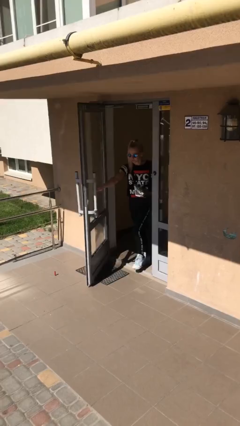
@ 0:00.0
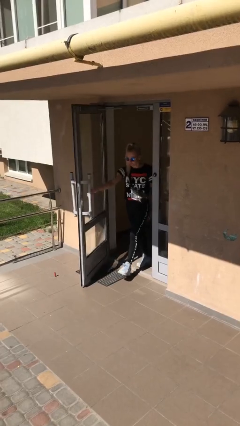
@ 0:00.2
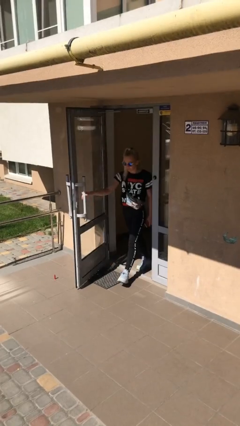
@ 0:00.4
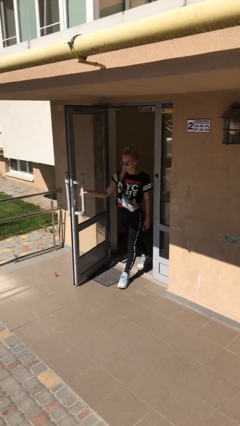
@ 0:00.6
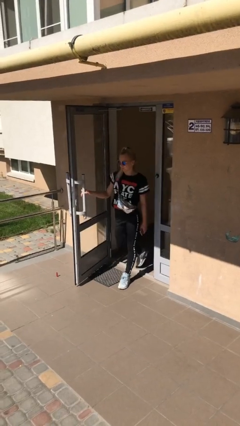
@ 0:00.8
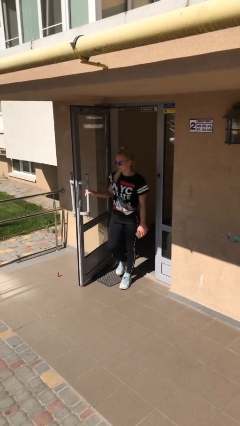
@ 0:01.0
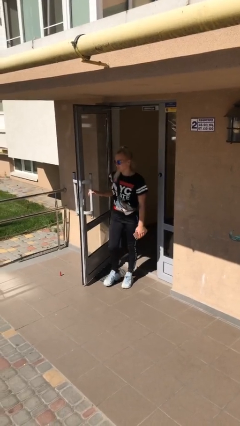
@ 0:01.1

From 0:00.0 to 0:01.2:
person enters scene through structure

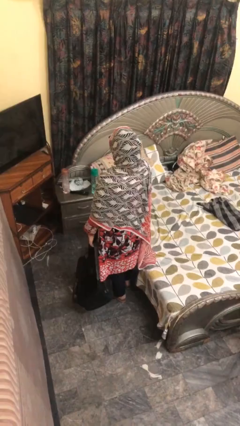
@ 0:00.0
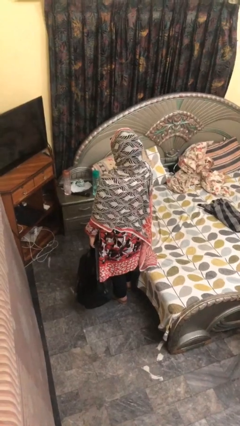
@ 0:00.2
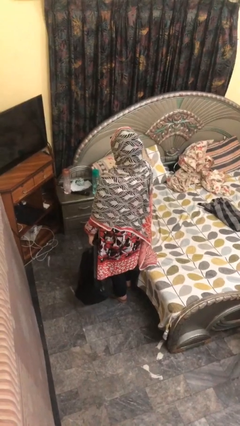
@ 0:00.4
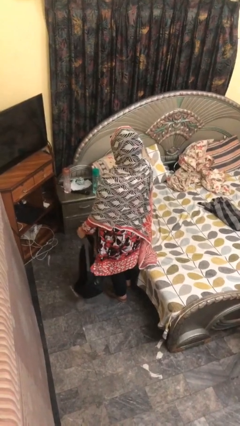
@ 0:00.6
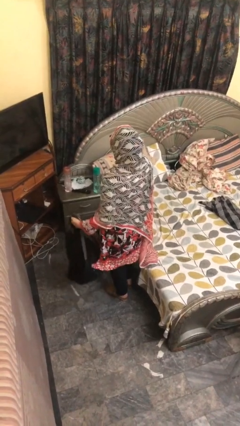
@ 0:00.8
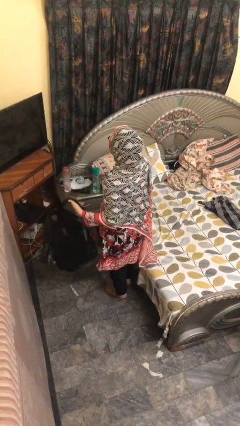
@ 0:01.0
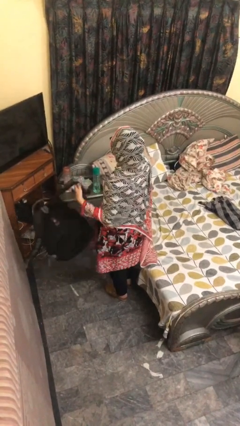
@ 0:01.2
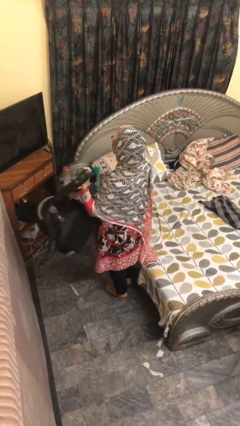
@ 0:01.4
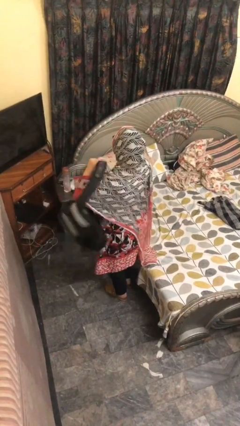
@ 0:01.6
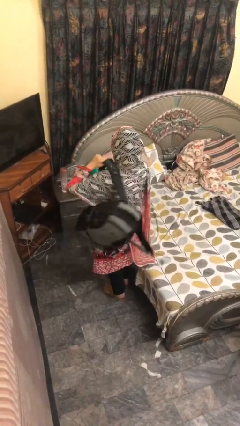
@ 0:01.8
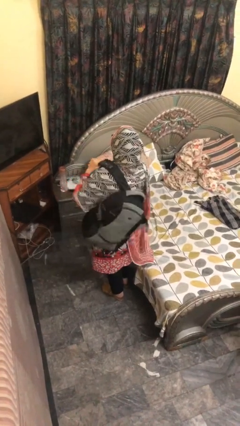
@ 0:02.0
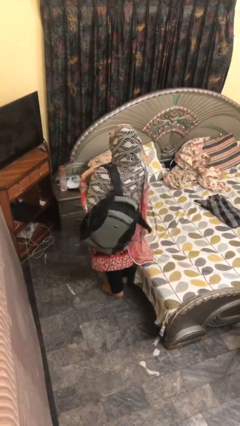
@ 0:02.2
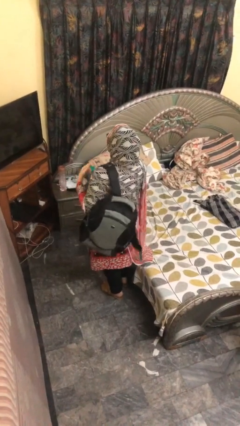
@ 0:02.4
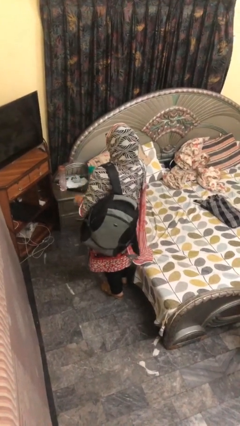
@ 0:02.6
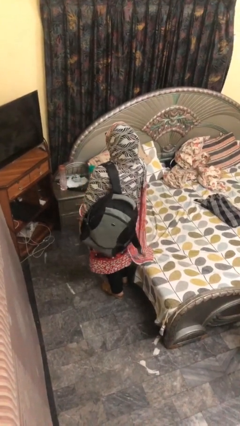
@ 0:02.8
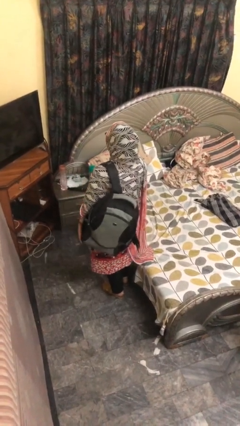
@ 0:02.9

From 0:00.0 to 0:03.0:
person puts on backpack

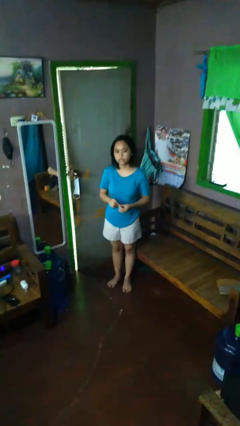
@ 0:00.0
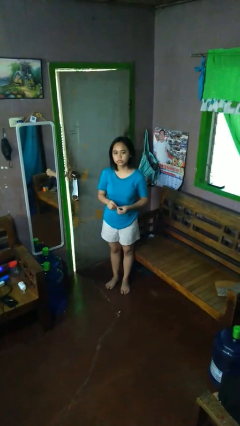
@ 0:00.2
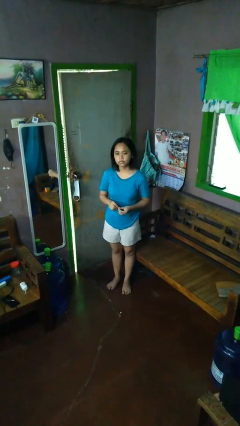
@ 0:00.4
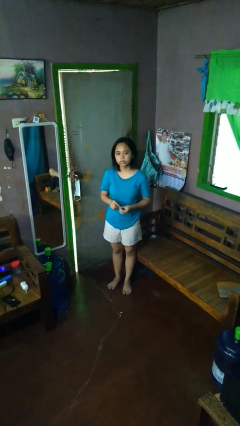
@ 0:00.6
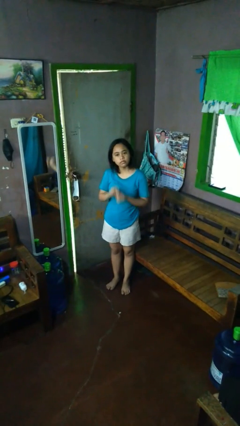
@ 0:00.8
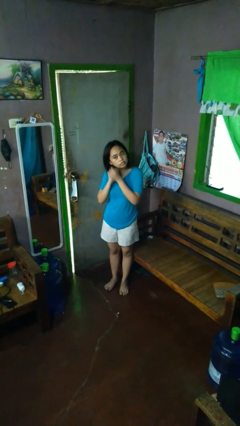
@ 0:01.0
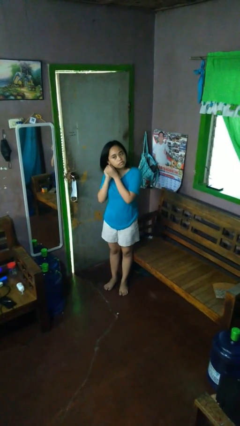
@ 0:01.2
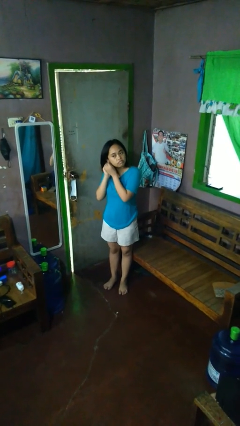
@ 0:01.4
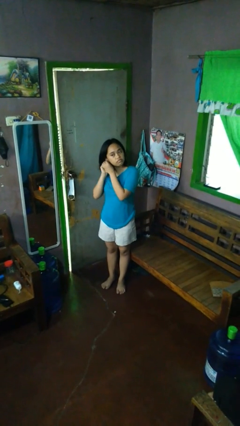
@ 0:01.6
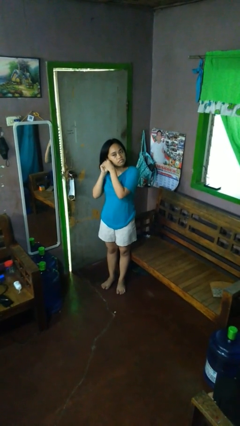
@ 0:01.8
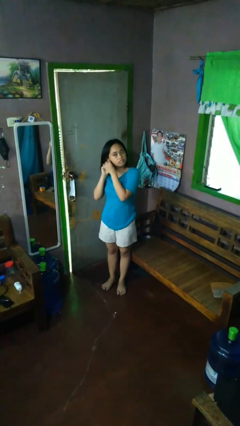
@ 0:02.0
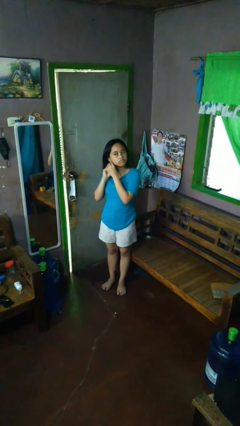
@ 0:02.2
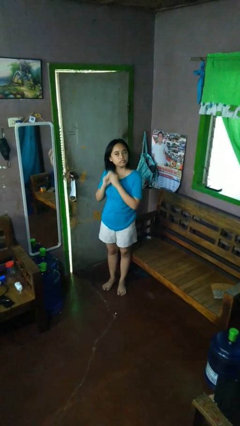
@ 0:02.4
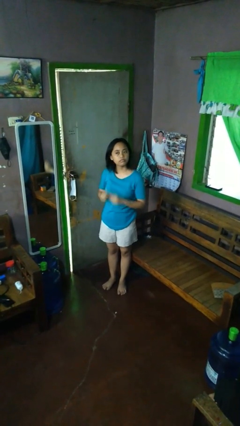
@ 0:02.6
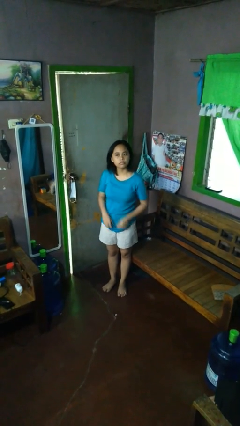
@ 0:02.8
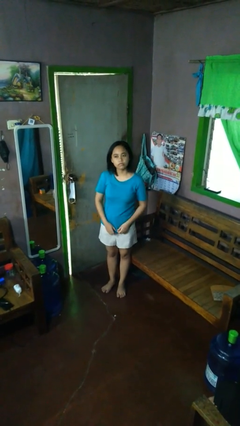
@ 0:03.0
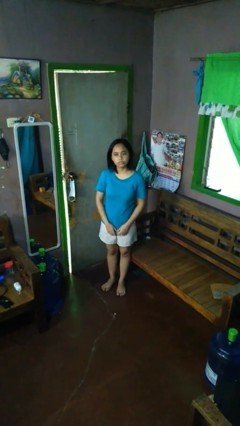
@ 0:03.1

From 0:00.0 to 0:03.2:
person puts on earrings

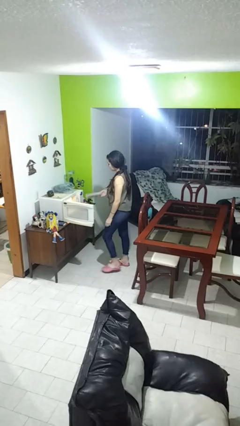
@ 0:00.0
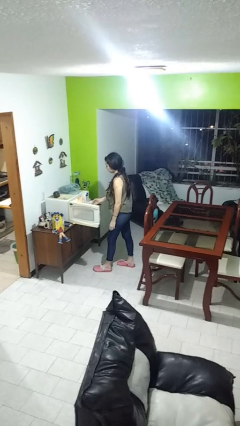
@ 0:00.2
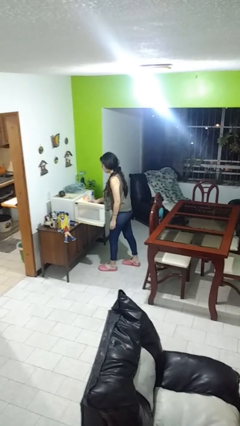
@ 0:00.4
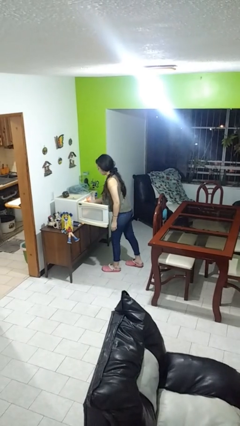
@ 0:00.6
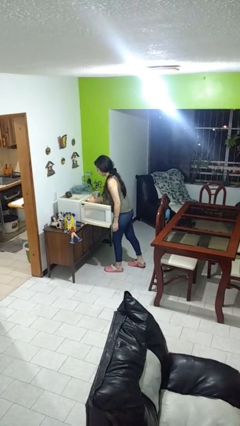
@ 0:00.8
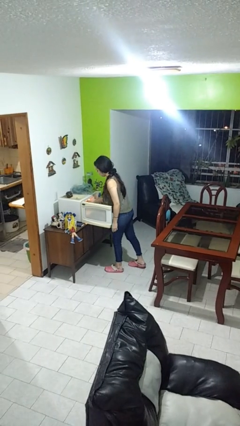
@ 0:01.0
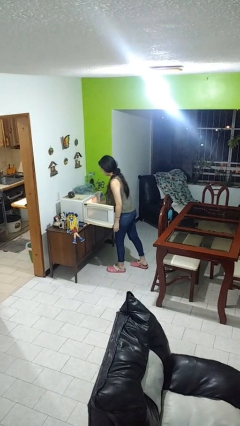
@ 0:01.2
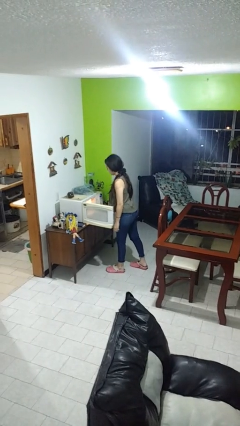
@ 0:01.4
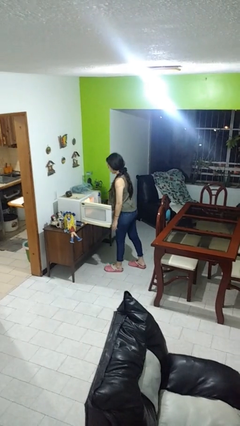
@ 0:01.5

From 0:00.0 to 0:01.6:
person puts object into microwave

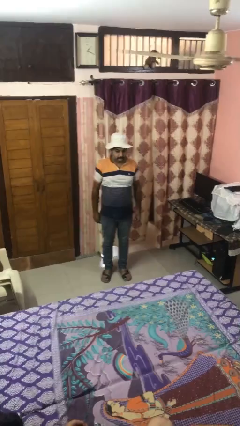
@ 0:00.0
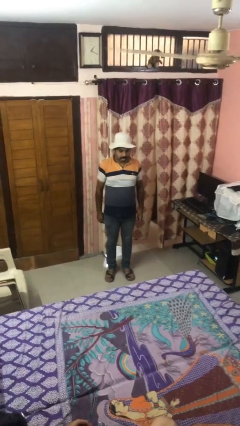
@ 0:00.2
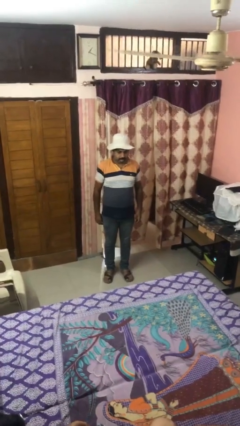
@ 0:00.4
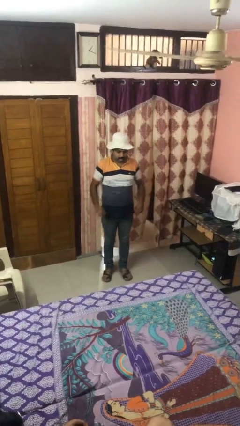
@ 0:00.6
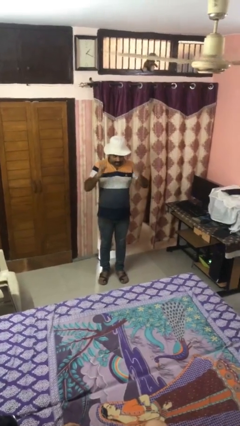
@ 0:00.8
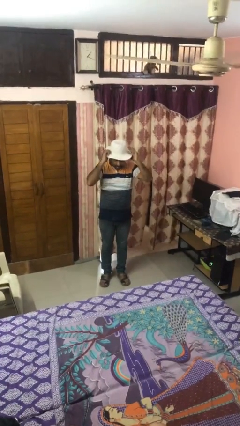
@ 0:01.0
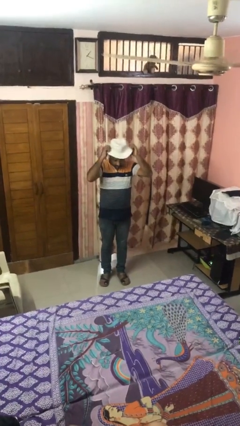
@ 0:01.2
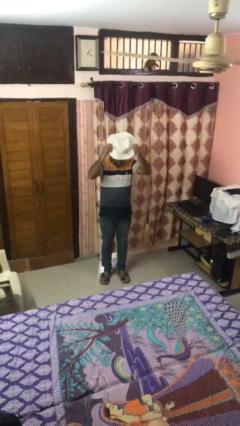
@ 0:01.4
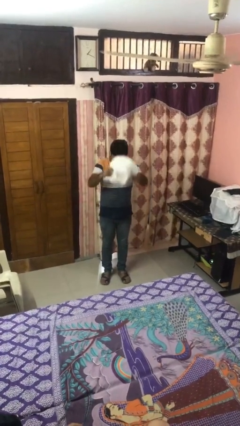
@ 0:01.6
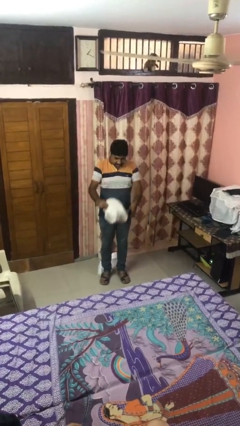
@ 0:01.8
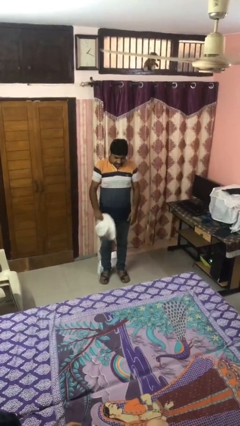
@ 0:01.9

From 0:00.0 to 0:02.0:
person takes off hat

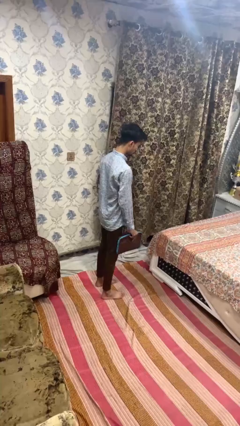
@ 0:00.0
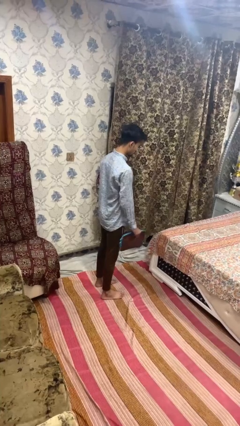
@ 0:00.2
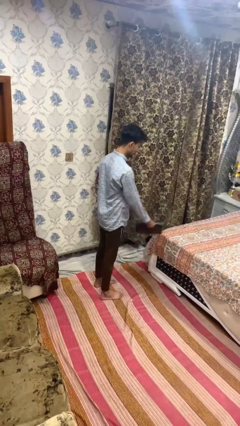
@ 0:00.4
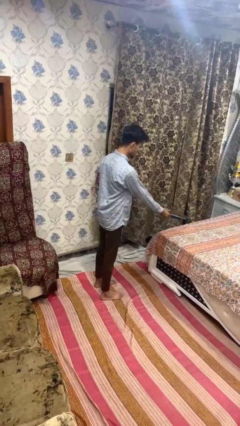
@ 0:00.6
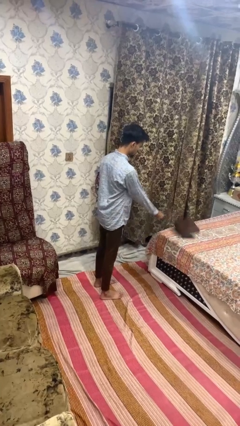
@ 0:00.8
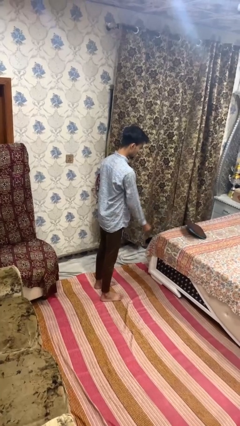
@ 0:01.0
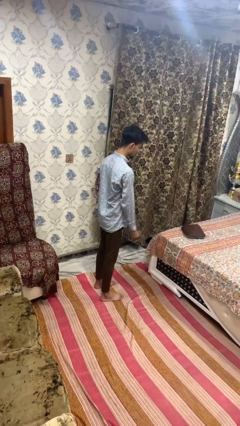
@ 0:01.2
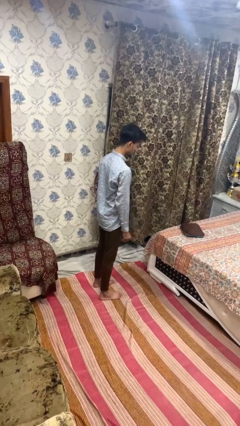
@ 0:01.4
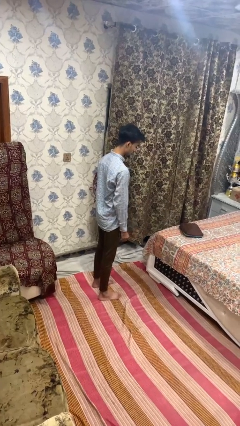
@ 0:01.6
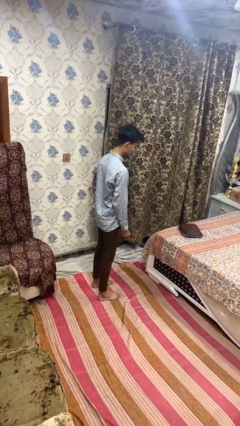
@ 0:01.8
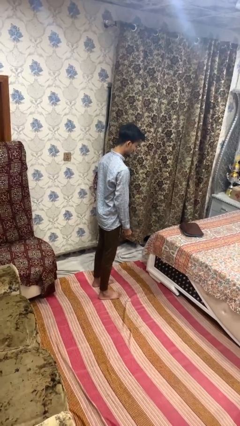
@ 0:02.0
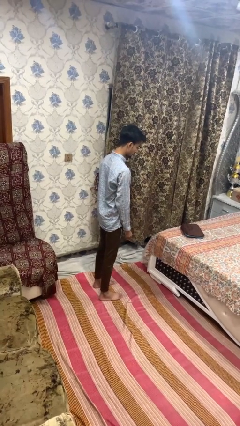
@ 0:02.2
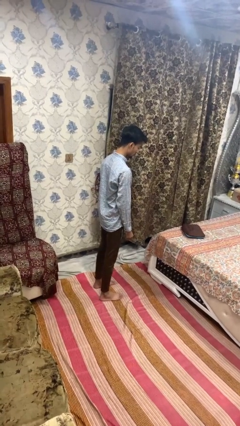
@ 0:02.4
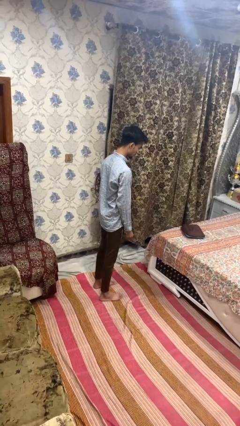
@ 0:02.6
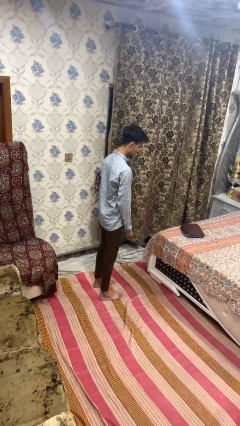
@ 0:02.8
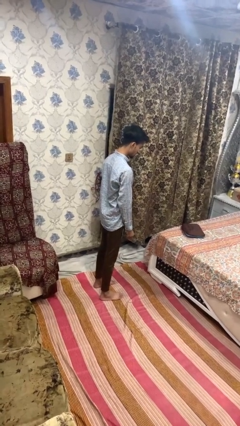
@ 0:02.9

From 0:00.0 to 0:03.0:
person throws object on bed

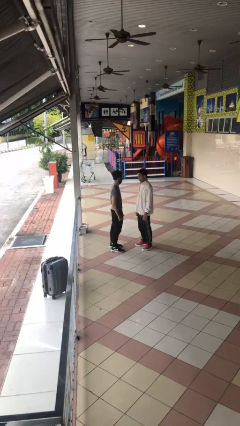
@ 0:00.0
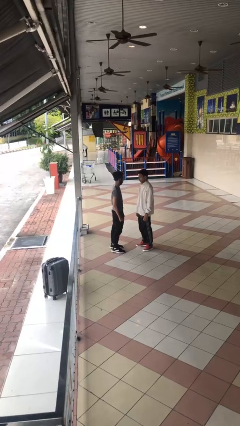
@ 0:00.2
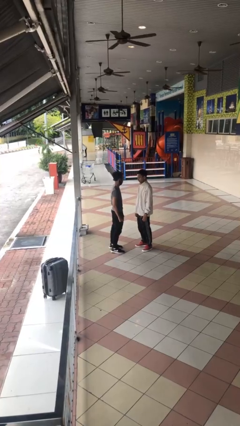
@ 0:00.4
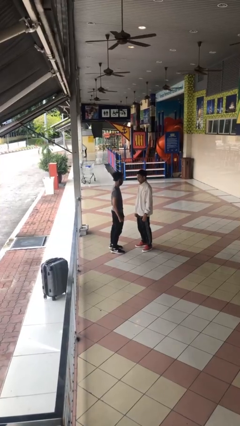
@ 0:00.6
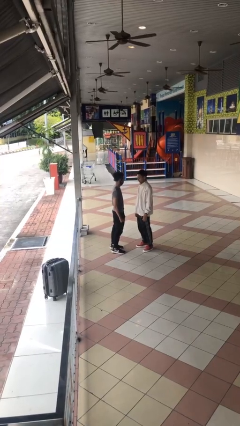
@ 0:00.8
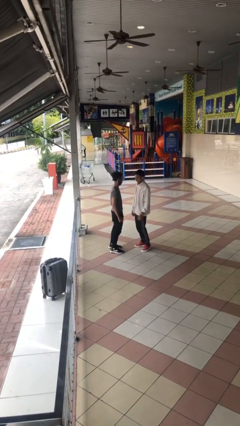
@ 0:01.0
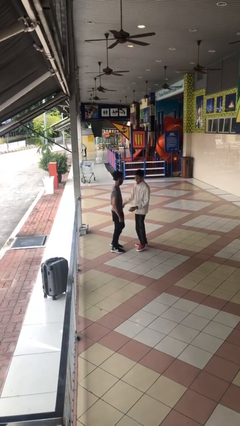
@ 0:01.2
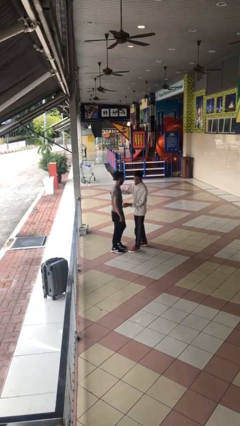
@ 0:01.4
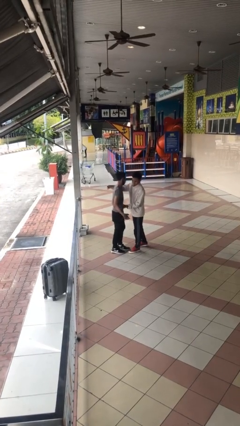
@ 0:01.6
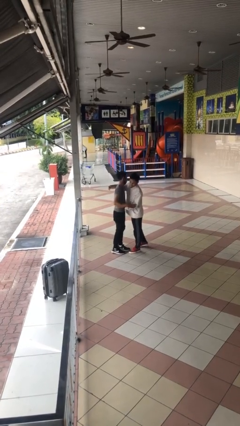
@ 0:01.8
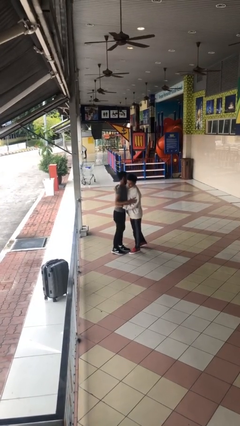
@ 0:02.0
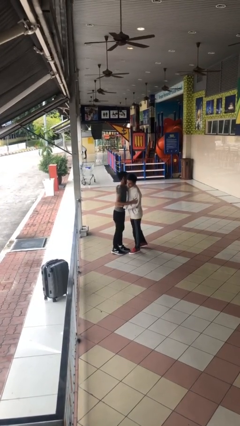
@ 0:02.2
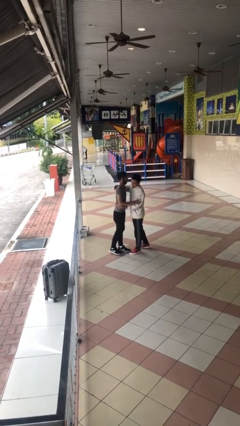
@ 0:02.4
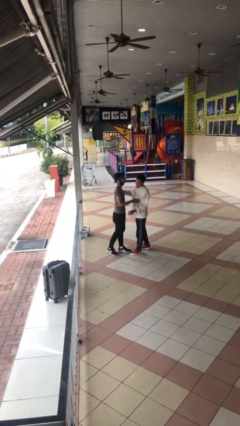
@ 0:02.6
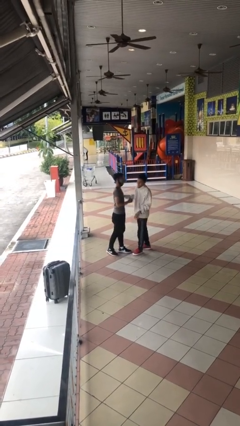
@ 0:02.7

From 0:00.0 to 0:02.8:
person embraces person

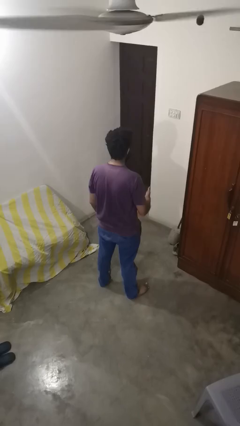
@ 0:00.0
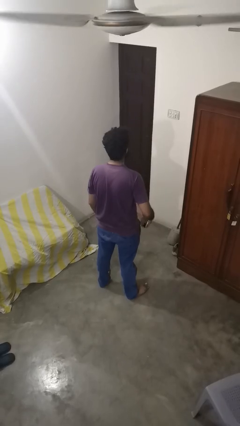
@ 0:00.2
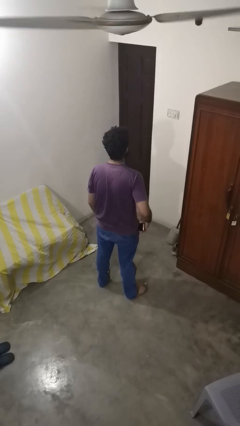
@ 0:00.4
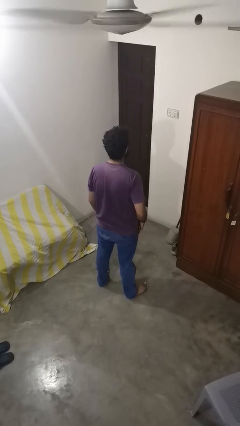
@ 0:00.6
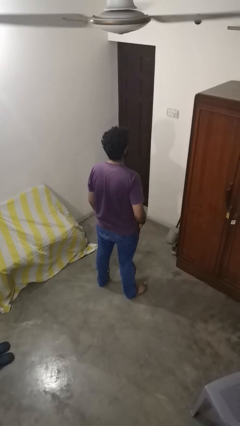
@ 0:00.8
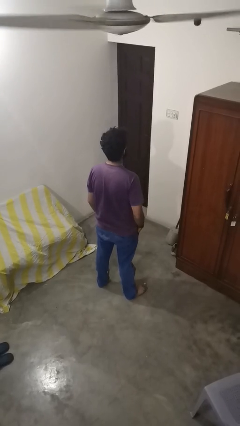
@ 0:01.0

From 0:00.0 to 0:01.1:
person puts phone into pocket
